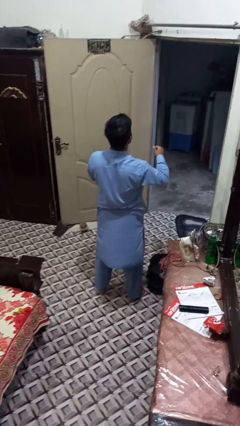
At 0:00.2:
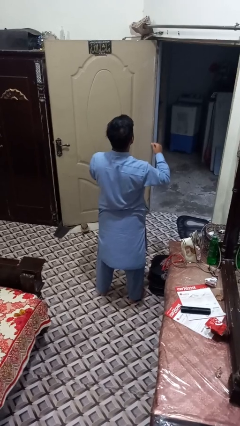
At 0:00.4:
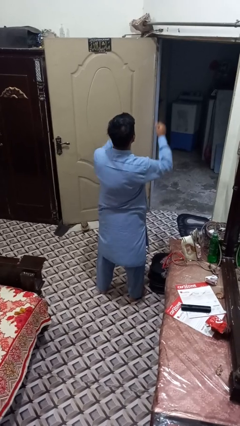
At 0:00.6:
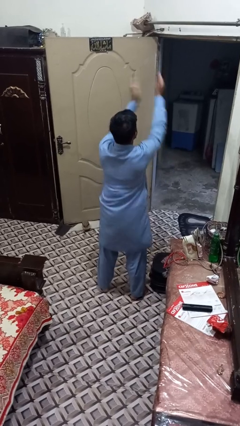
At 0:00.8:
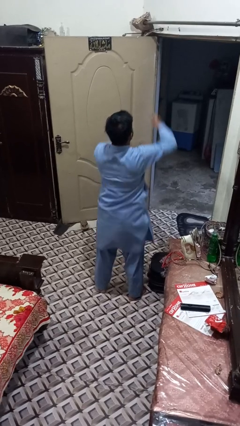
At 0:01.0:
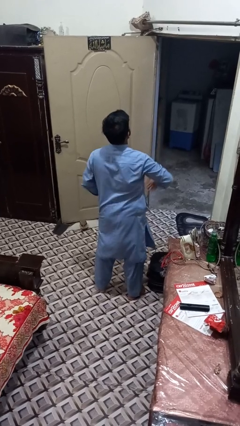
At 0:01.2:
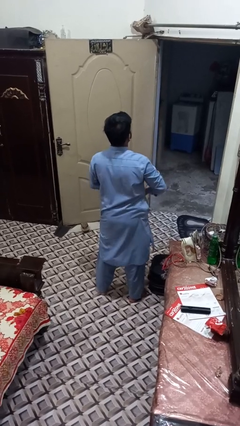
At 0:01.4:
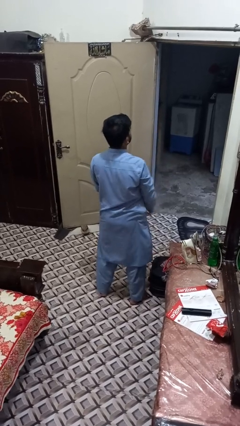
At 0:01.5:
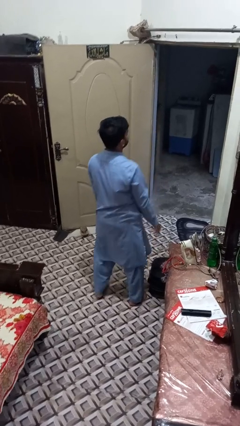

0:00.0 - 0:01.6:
person swats bug

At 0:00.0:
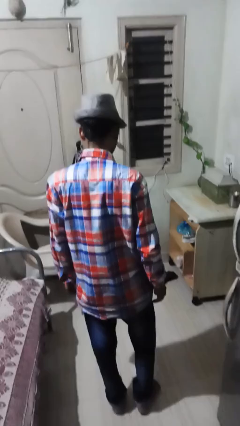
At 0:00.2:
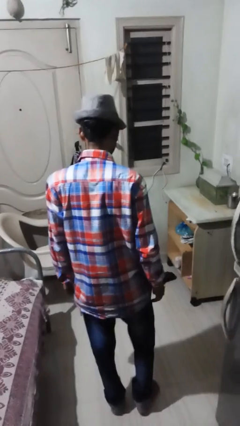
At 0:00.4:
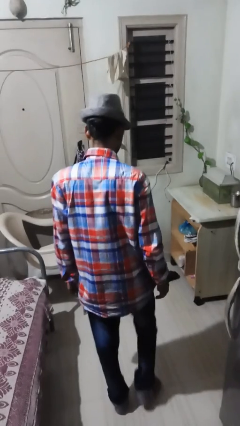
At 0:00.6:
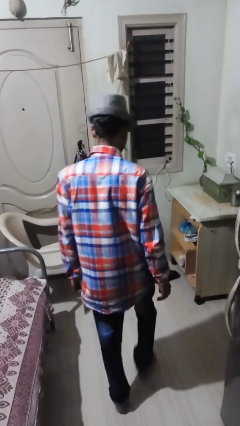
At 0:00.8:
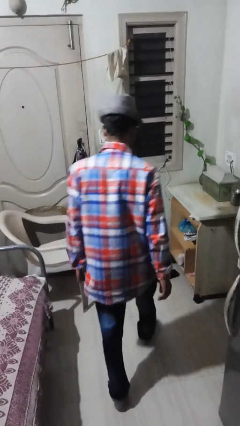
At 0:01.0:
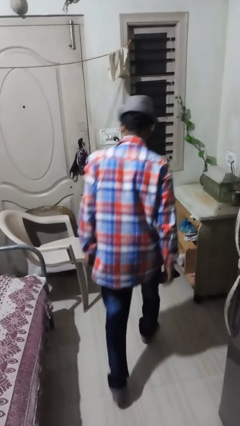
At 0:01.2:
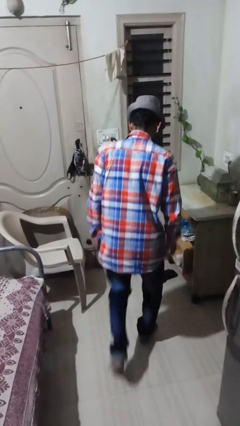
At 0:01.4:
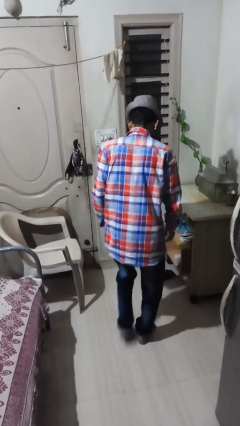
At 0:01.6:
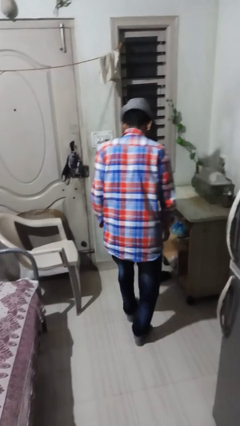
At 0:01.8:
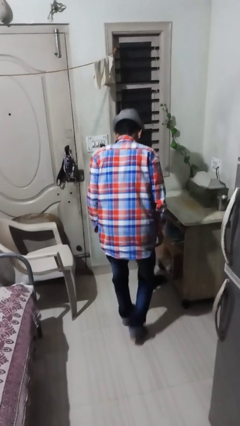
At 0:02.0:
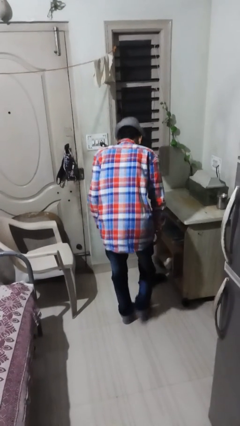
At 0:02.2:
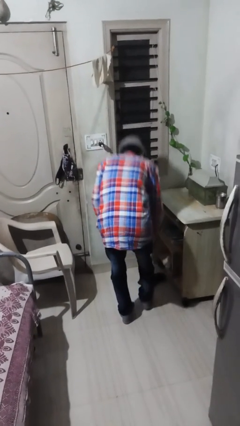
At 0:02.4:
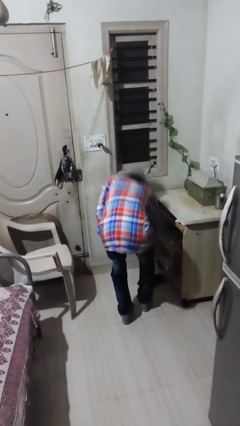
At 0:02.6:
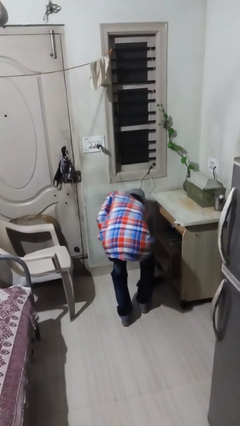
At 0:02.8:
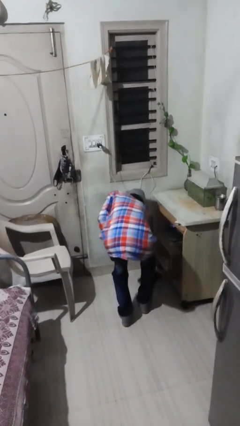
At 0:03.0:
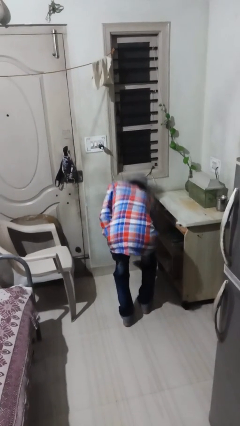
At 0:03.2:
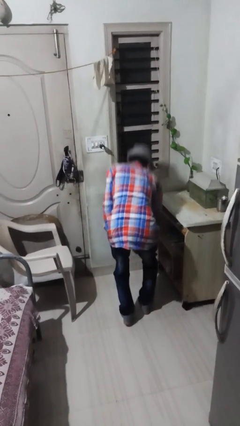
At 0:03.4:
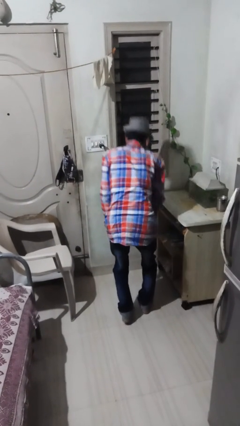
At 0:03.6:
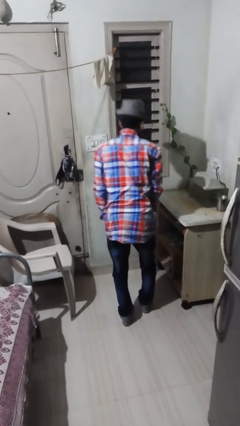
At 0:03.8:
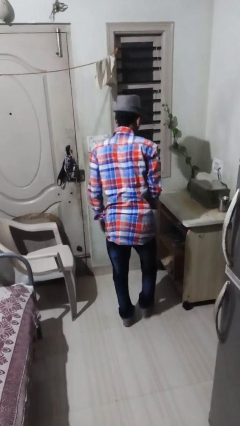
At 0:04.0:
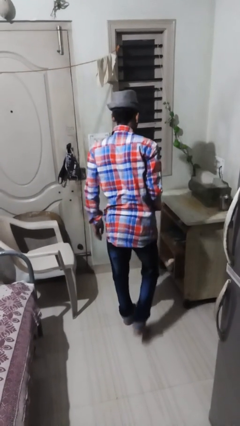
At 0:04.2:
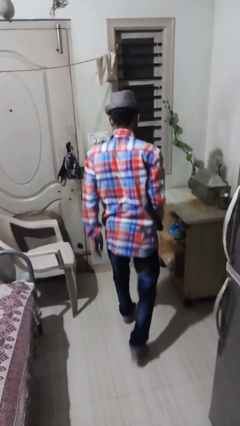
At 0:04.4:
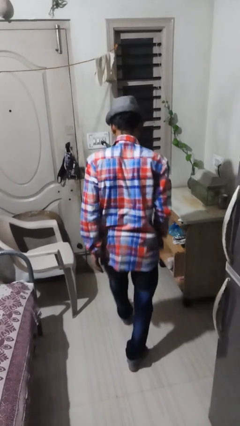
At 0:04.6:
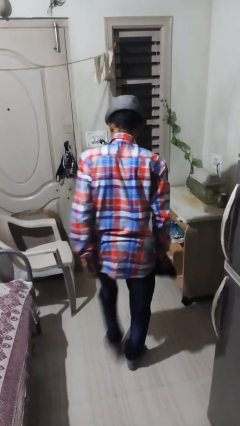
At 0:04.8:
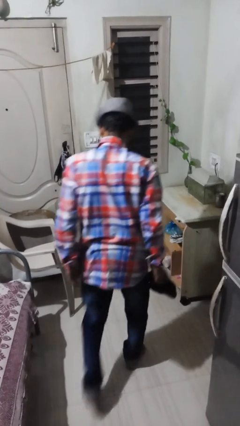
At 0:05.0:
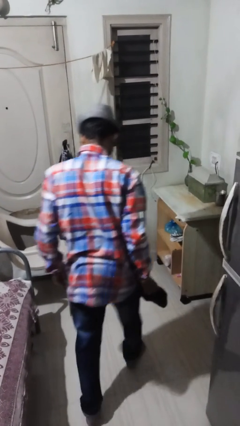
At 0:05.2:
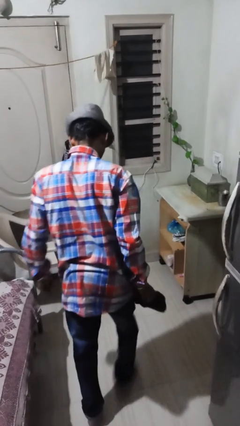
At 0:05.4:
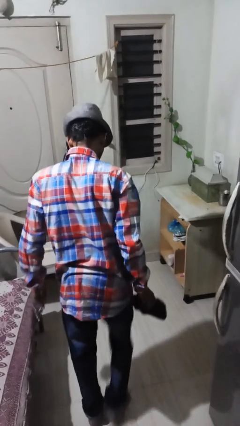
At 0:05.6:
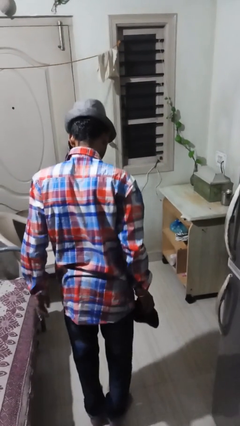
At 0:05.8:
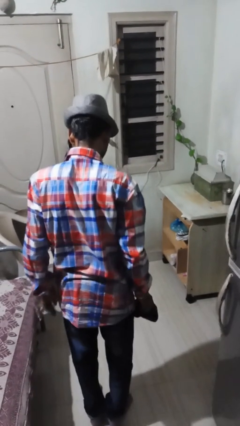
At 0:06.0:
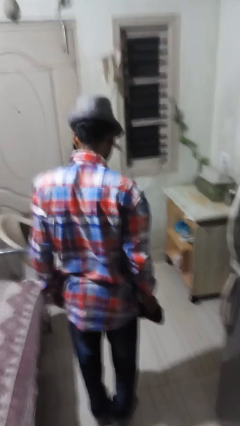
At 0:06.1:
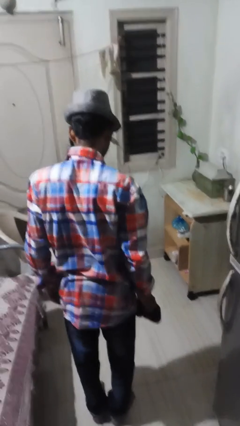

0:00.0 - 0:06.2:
person picks up object from floor

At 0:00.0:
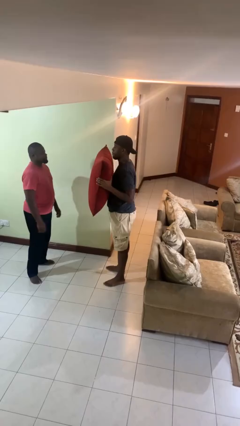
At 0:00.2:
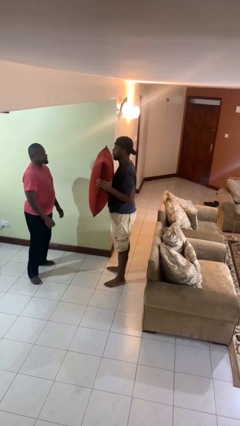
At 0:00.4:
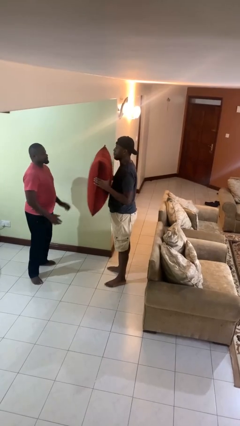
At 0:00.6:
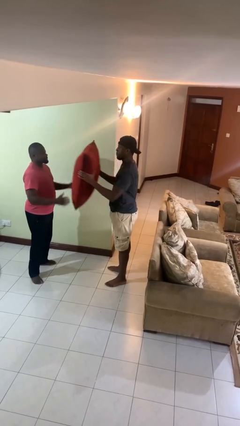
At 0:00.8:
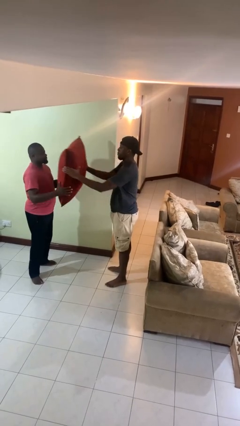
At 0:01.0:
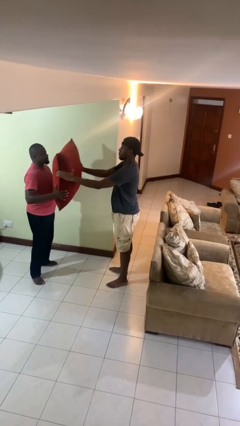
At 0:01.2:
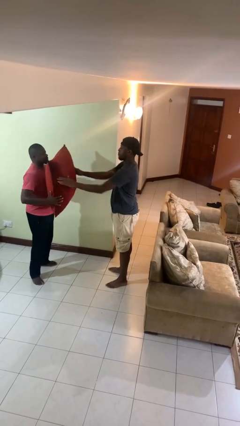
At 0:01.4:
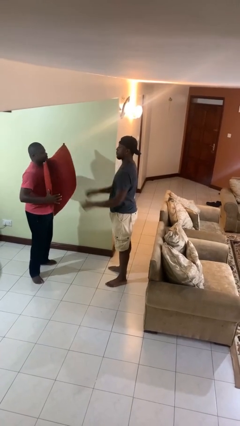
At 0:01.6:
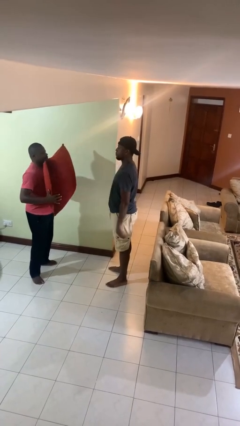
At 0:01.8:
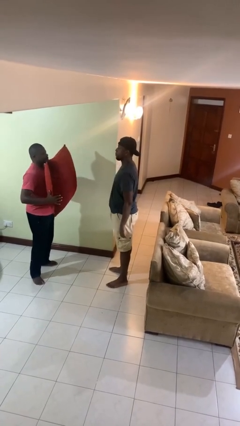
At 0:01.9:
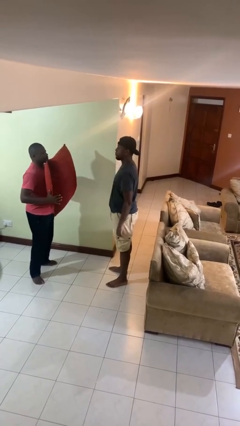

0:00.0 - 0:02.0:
person transfers object to person

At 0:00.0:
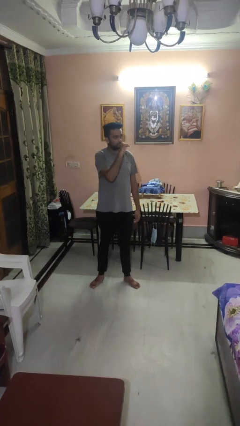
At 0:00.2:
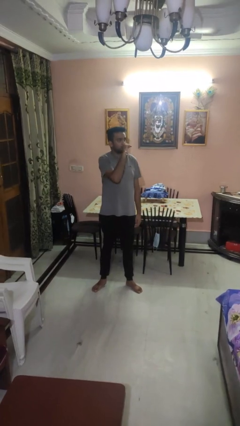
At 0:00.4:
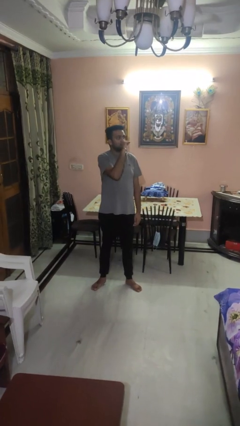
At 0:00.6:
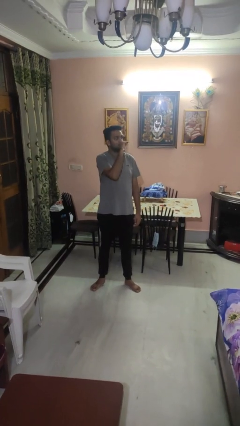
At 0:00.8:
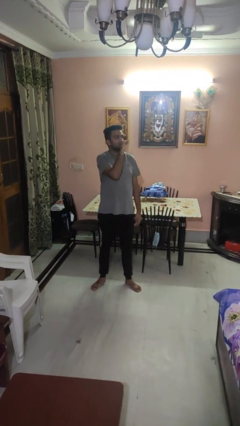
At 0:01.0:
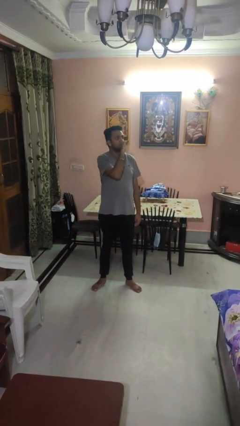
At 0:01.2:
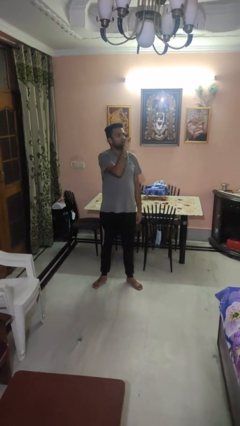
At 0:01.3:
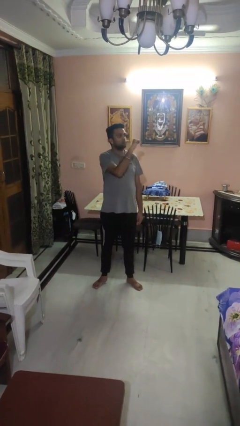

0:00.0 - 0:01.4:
person vapes

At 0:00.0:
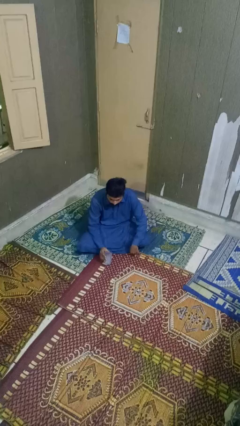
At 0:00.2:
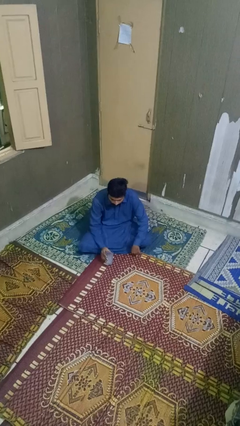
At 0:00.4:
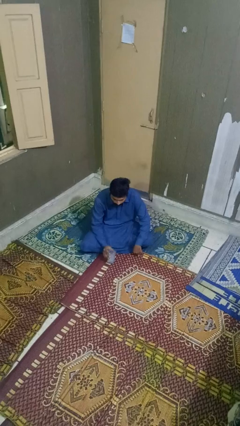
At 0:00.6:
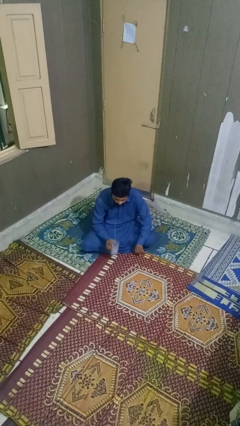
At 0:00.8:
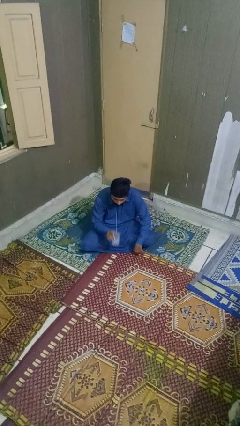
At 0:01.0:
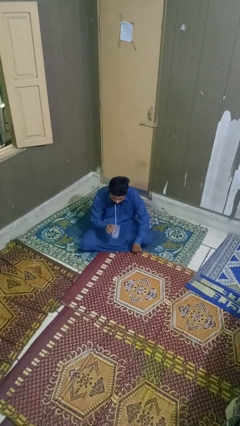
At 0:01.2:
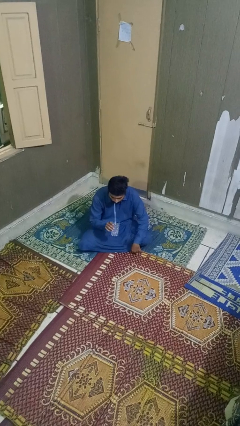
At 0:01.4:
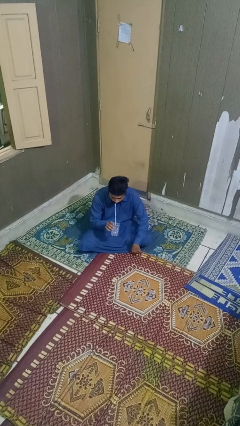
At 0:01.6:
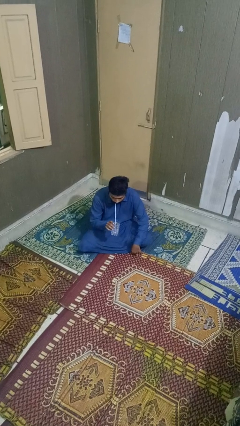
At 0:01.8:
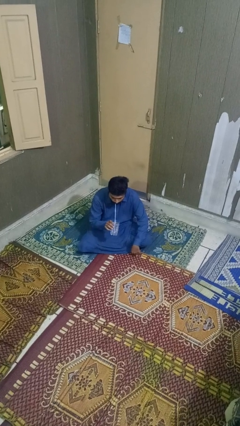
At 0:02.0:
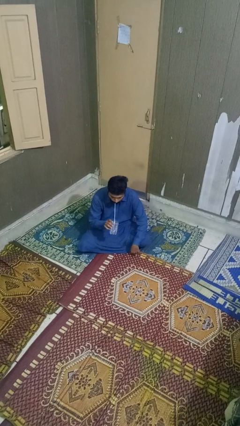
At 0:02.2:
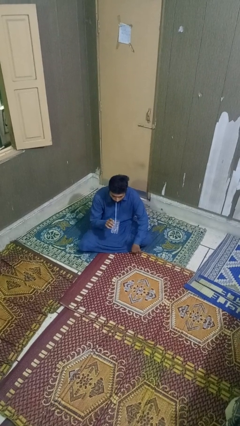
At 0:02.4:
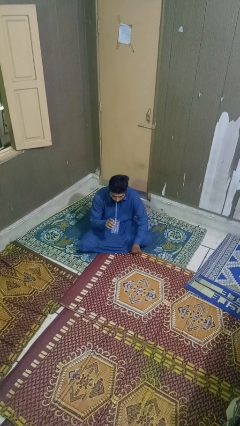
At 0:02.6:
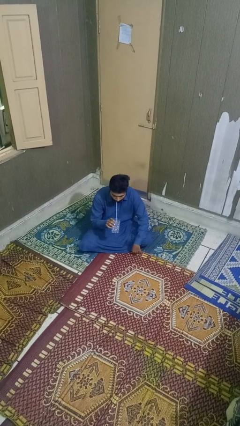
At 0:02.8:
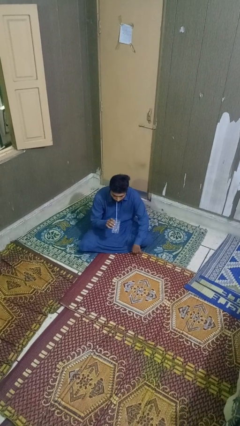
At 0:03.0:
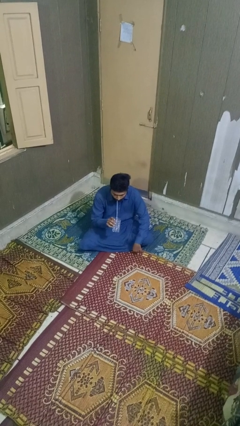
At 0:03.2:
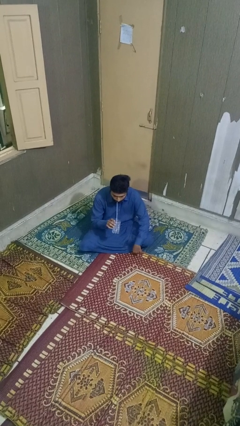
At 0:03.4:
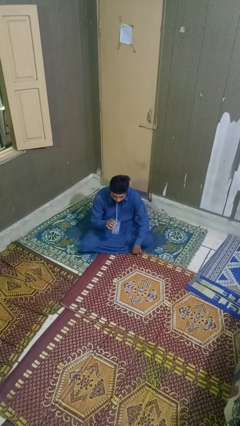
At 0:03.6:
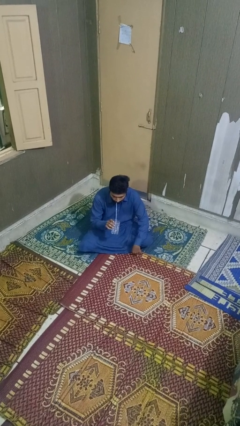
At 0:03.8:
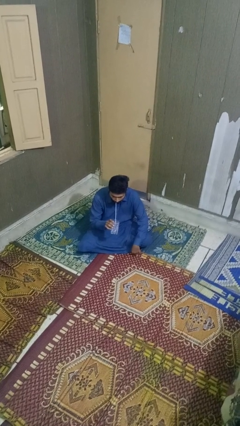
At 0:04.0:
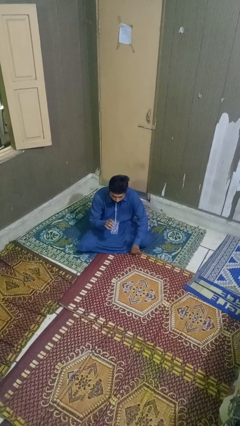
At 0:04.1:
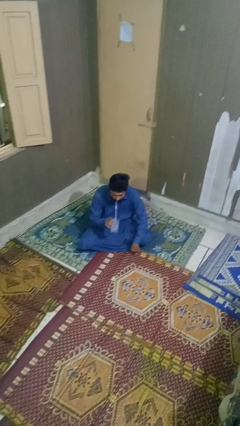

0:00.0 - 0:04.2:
person drinks from straw

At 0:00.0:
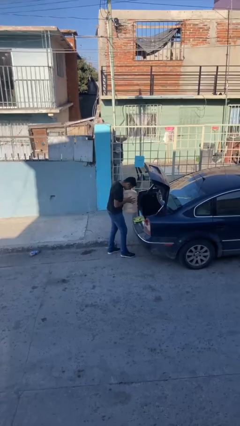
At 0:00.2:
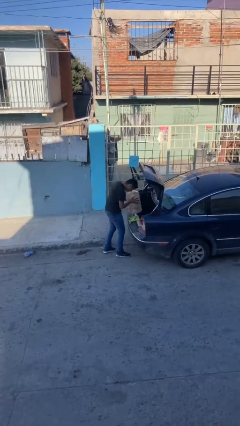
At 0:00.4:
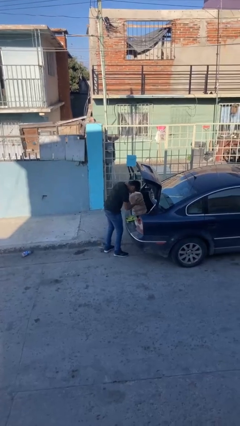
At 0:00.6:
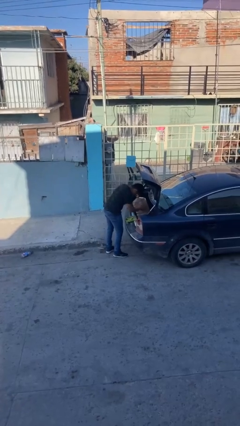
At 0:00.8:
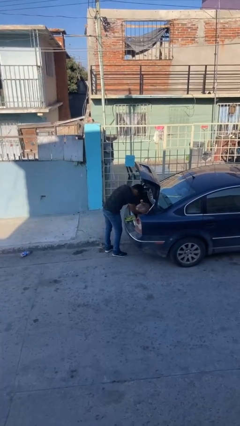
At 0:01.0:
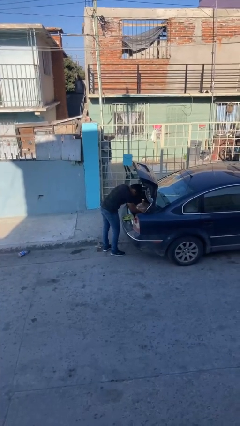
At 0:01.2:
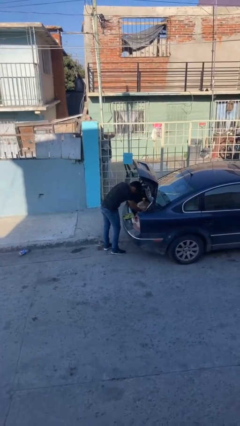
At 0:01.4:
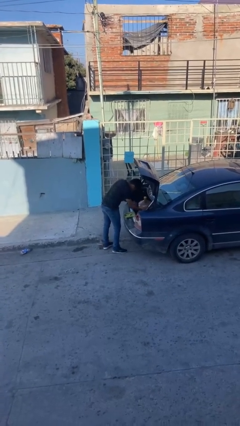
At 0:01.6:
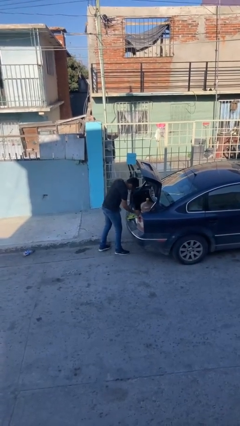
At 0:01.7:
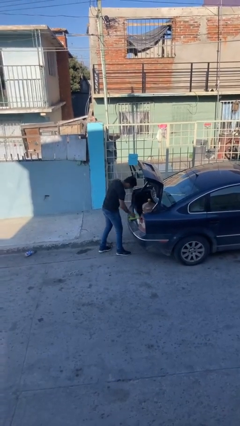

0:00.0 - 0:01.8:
person loads car

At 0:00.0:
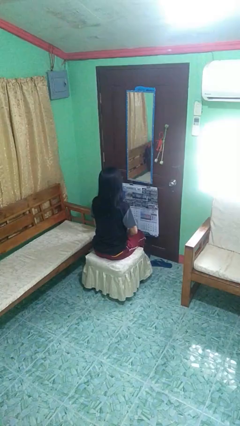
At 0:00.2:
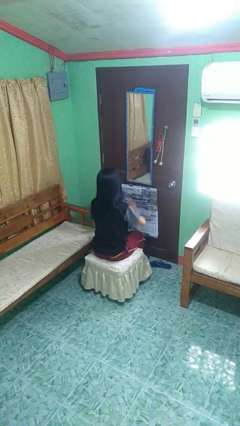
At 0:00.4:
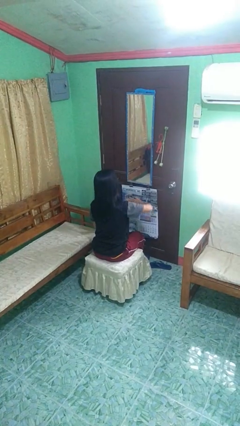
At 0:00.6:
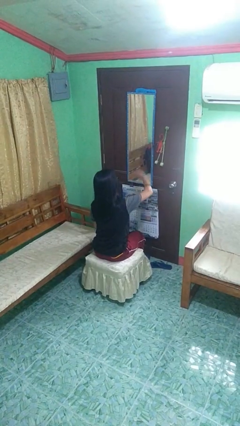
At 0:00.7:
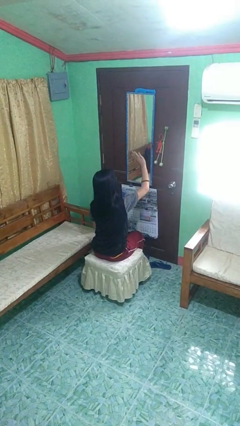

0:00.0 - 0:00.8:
person gestures swipe down
